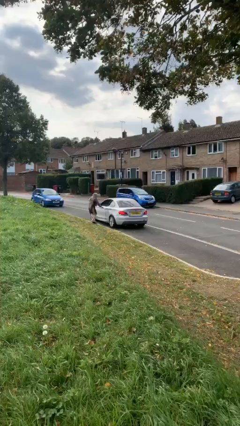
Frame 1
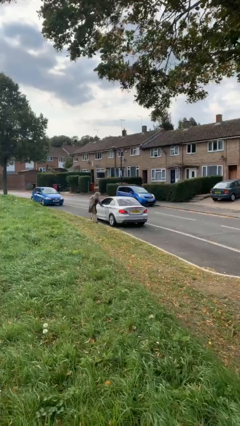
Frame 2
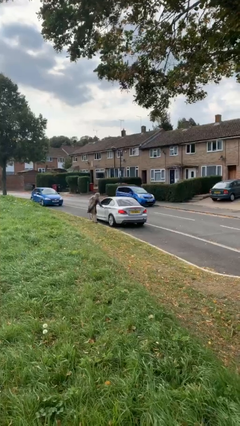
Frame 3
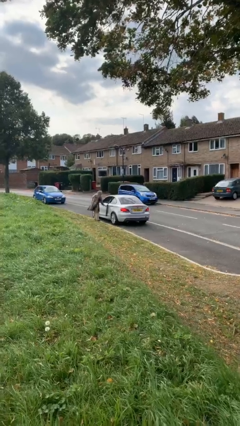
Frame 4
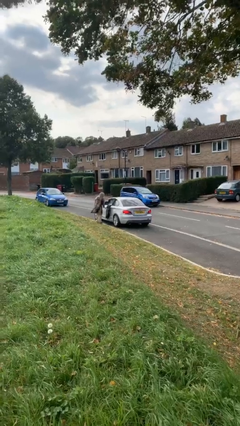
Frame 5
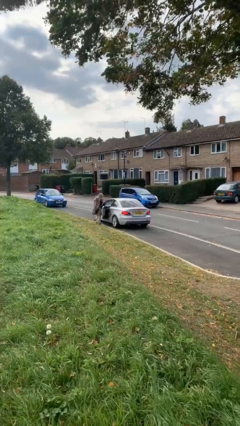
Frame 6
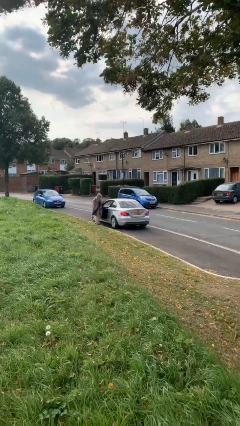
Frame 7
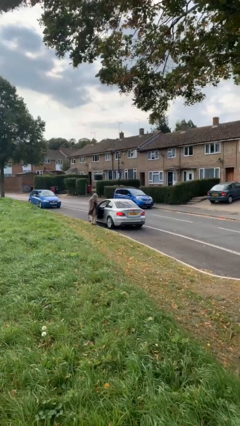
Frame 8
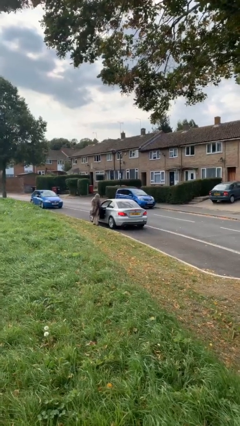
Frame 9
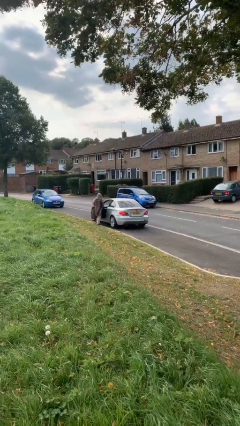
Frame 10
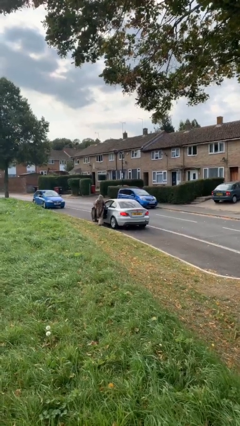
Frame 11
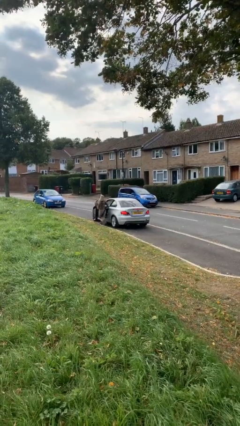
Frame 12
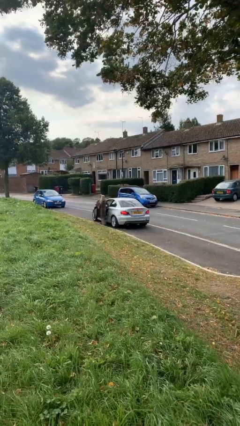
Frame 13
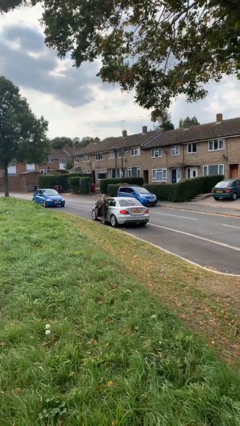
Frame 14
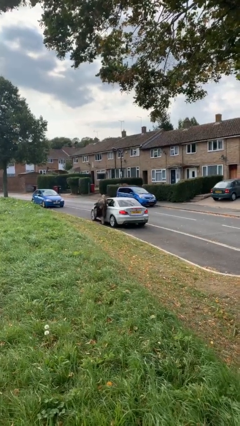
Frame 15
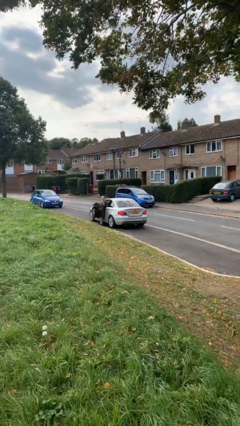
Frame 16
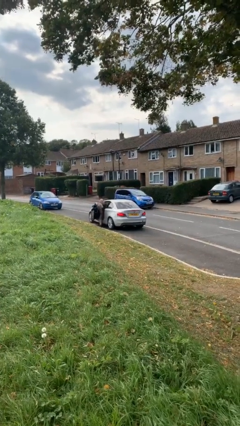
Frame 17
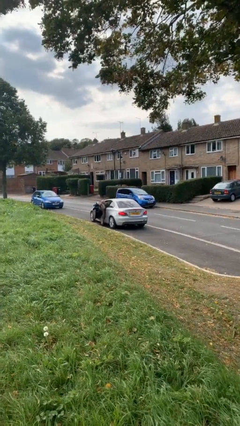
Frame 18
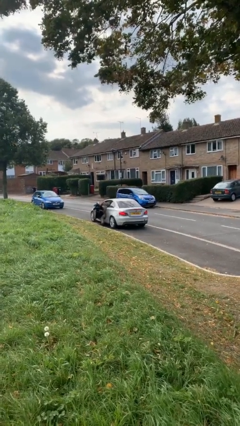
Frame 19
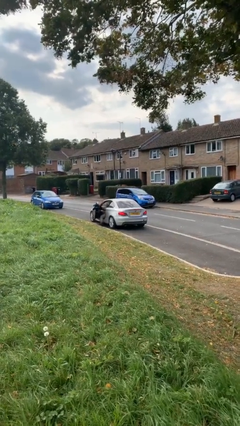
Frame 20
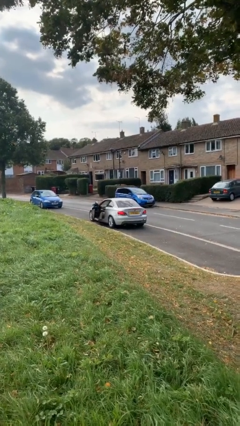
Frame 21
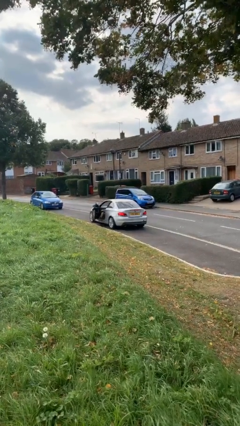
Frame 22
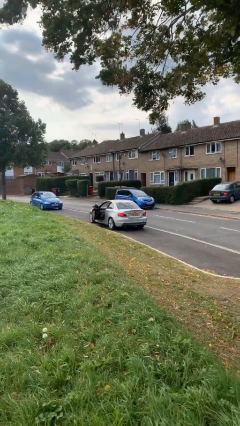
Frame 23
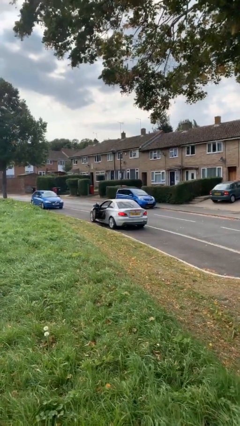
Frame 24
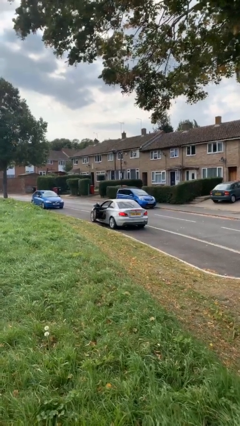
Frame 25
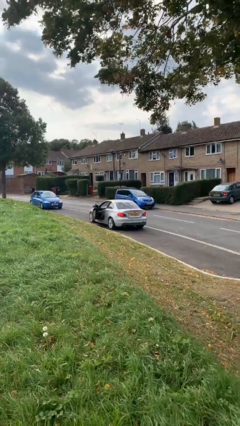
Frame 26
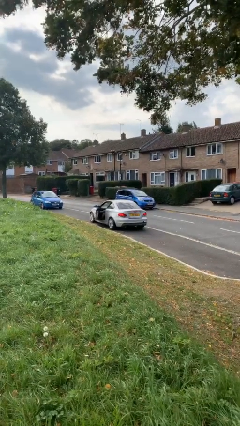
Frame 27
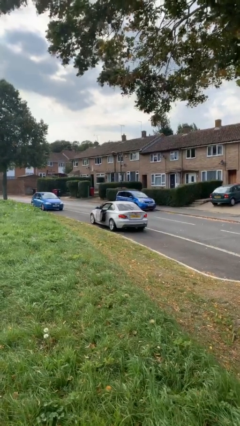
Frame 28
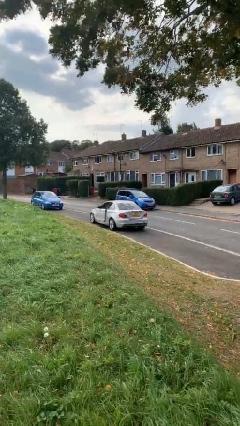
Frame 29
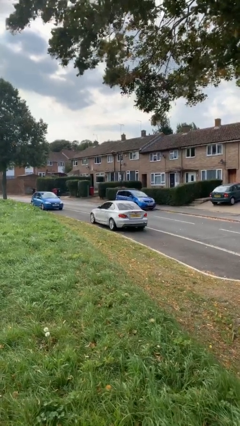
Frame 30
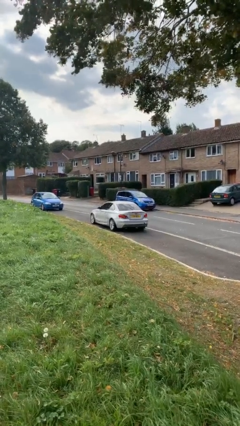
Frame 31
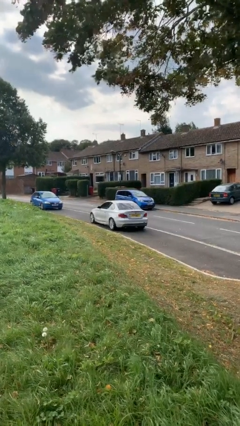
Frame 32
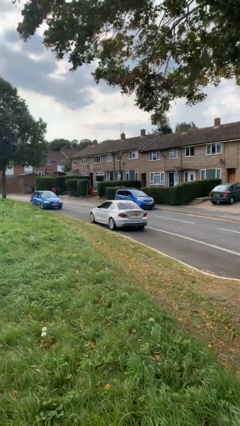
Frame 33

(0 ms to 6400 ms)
car picks up person

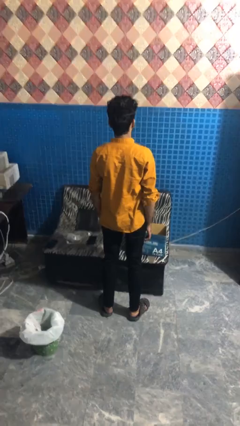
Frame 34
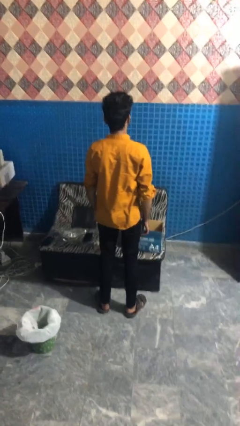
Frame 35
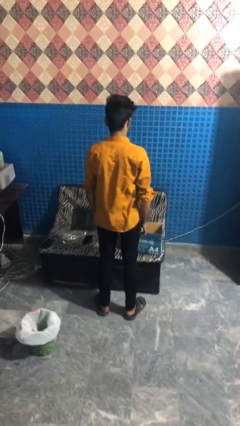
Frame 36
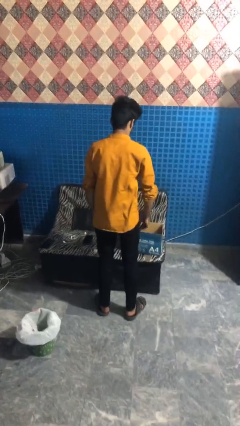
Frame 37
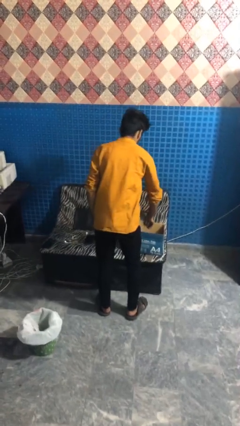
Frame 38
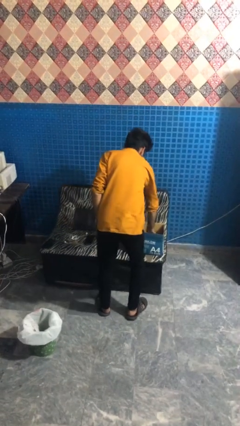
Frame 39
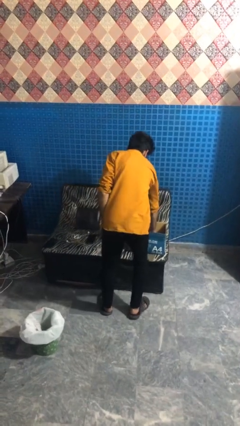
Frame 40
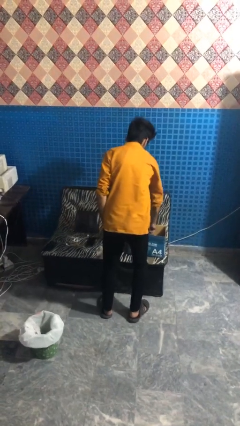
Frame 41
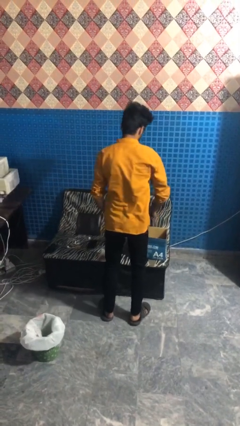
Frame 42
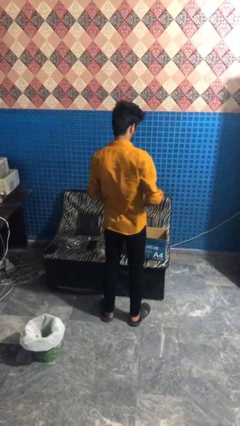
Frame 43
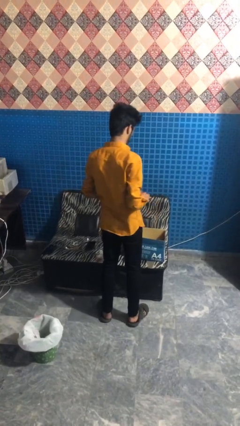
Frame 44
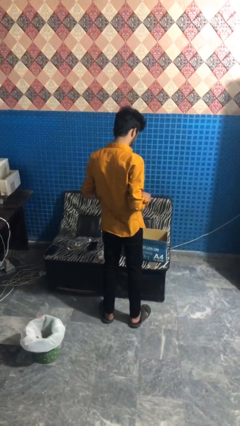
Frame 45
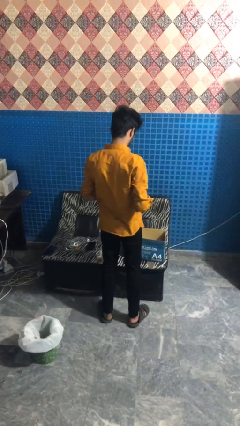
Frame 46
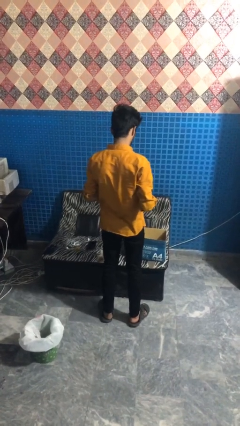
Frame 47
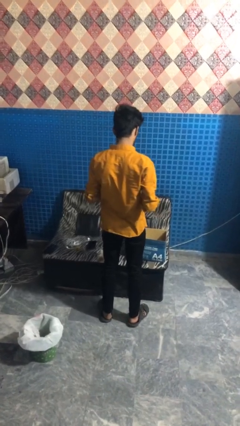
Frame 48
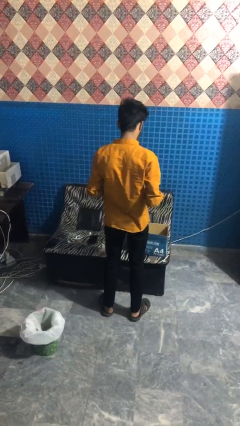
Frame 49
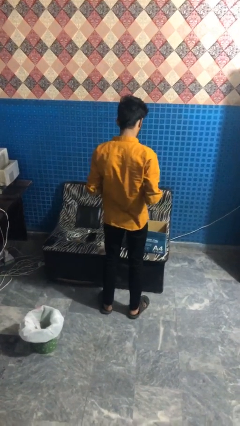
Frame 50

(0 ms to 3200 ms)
person takes object from box

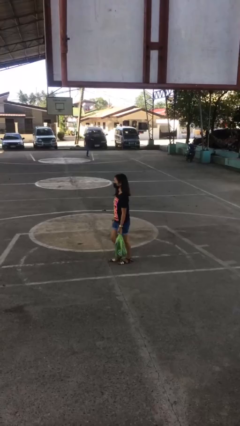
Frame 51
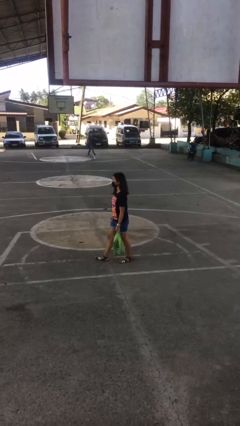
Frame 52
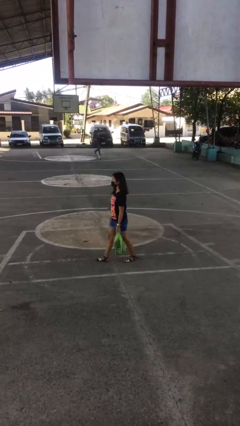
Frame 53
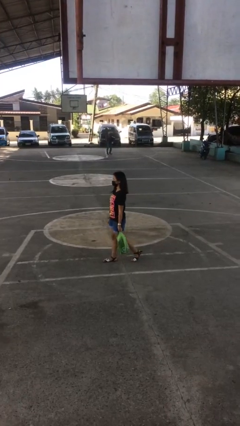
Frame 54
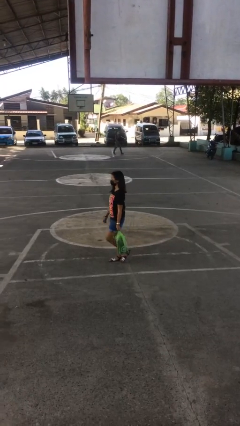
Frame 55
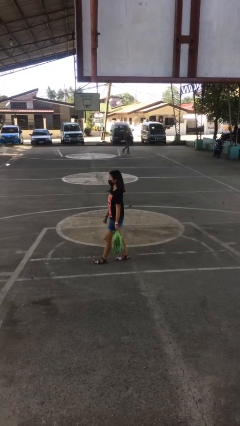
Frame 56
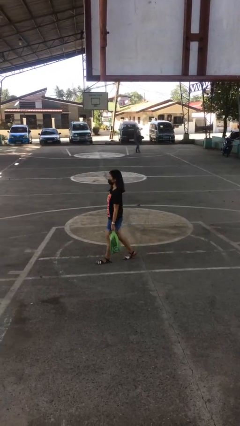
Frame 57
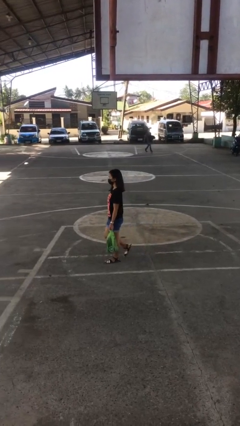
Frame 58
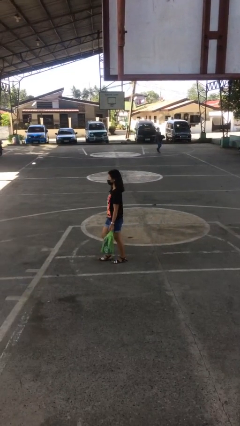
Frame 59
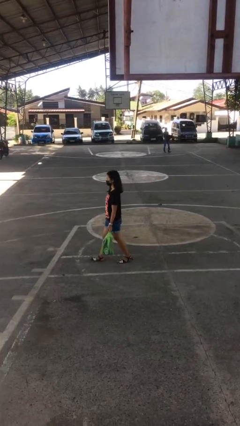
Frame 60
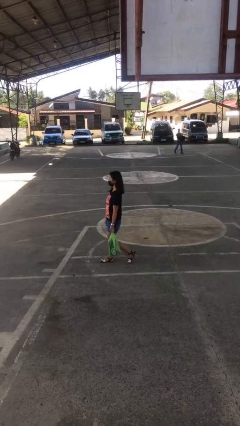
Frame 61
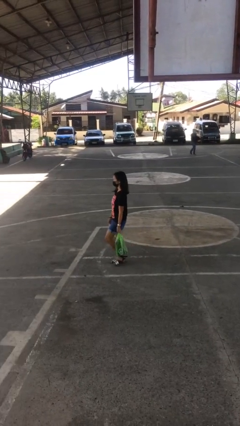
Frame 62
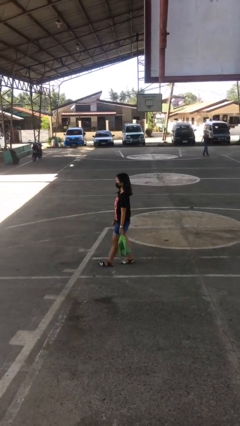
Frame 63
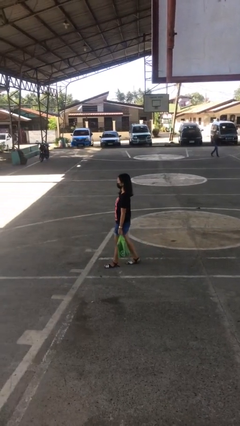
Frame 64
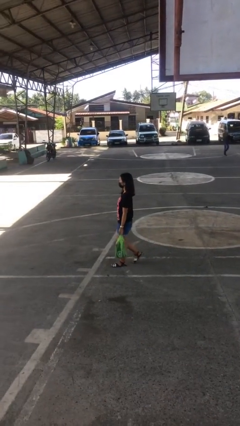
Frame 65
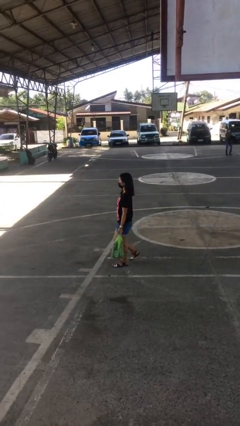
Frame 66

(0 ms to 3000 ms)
person carries groceries

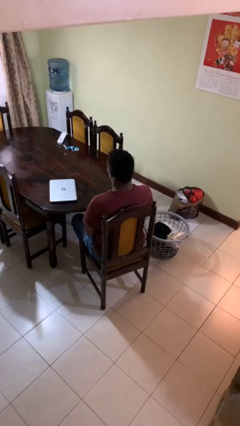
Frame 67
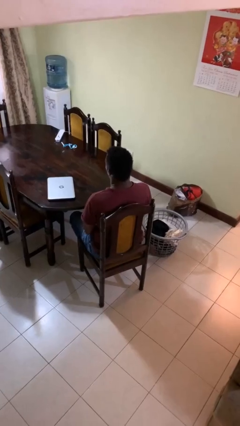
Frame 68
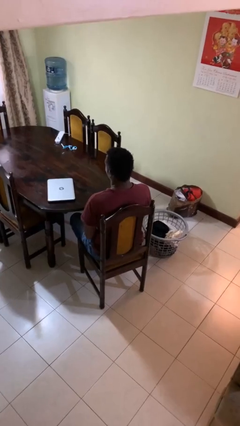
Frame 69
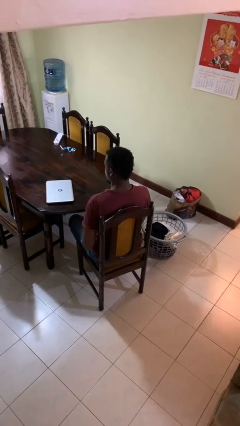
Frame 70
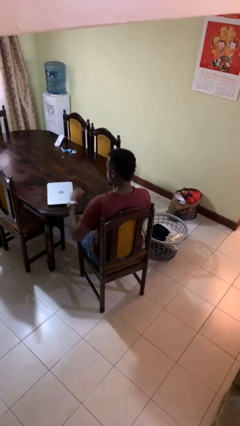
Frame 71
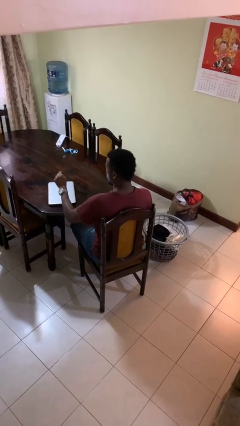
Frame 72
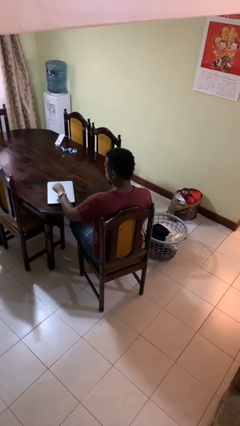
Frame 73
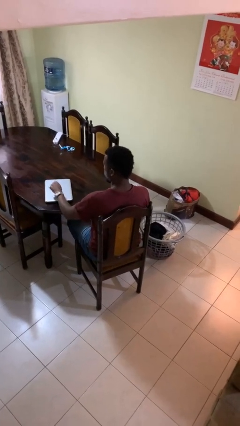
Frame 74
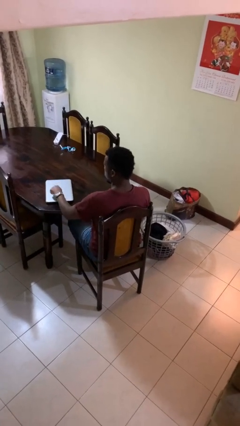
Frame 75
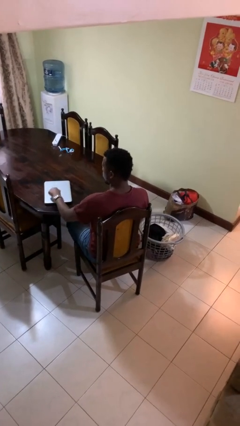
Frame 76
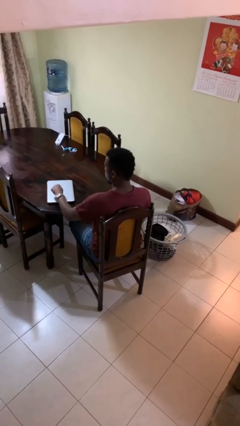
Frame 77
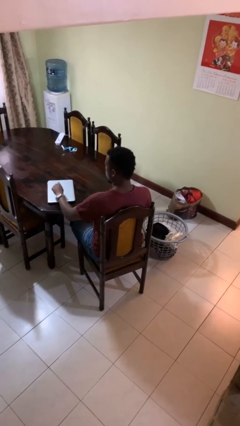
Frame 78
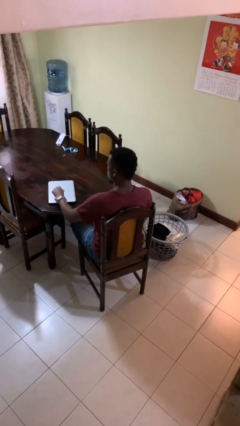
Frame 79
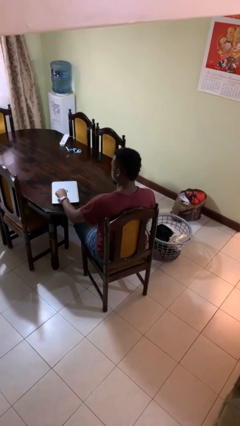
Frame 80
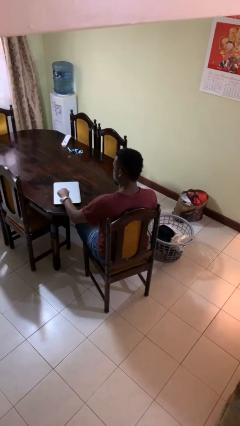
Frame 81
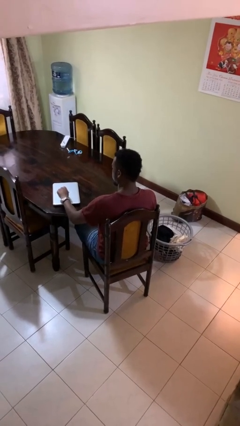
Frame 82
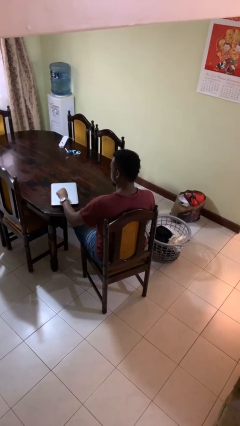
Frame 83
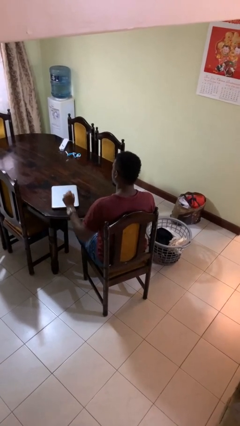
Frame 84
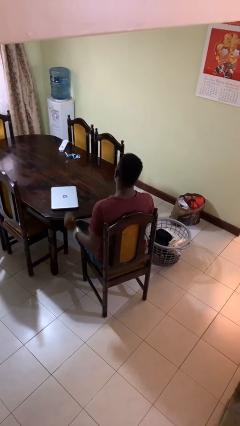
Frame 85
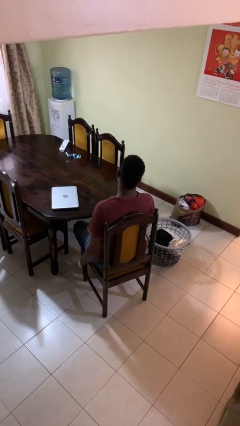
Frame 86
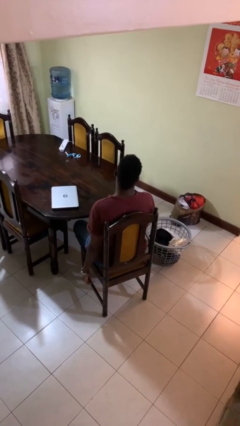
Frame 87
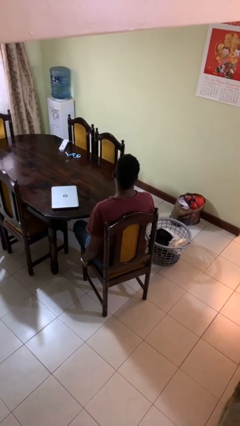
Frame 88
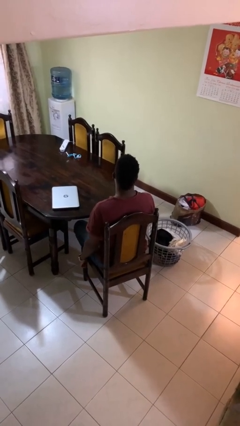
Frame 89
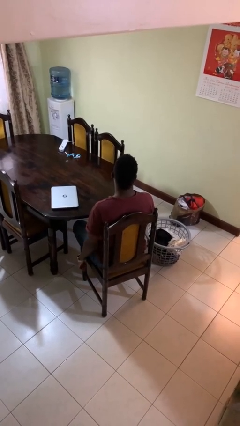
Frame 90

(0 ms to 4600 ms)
person taps object with finger

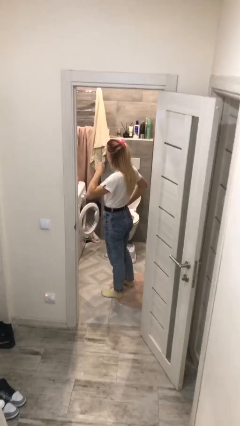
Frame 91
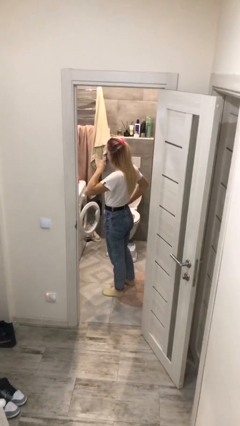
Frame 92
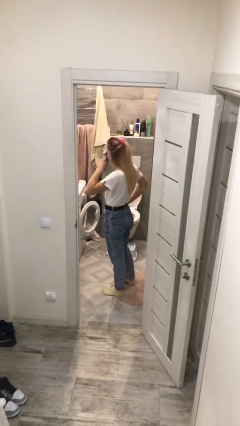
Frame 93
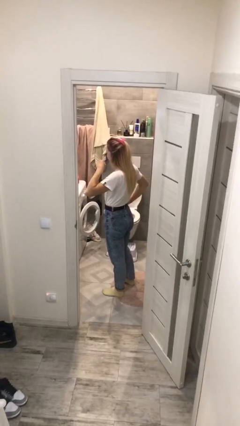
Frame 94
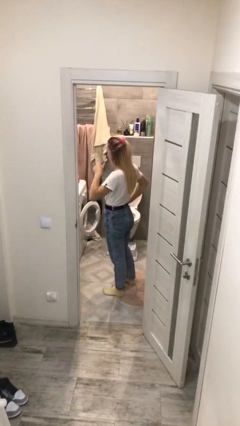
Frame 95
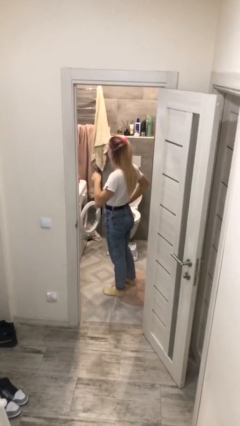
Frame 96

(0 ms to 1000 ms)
person brushes teeth
